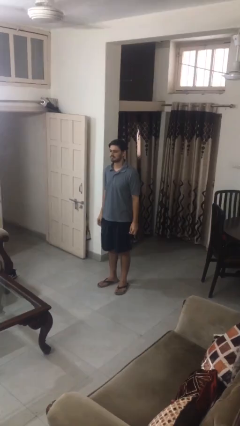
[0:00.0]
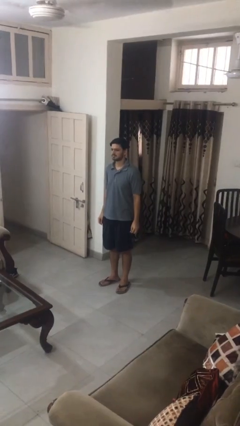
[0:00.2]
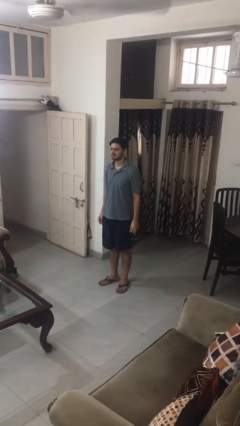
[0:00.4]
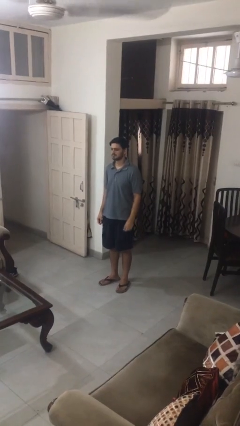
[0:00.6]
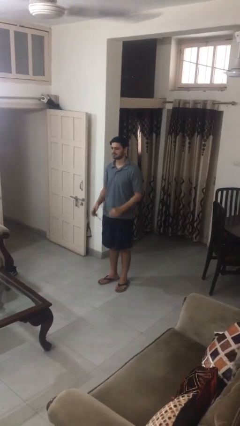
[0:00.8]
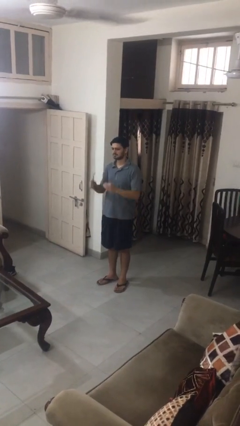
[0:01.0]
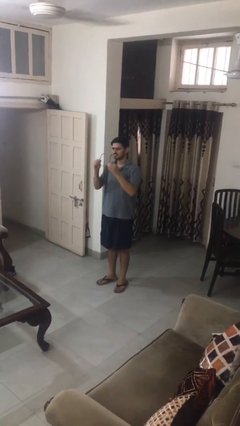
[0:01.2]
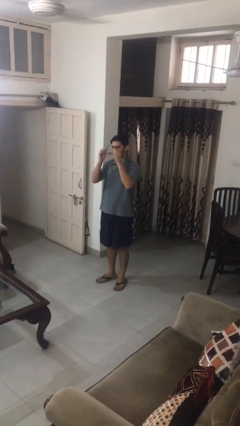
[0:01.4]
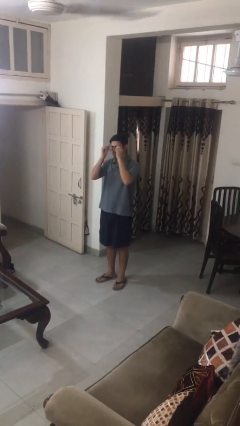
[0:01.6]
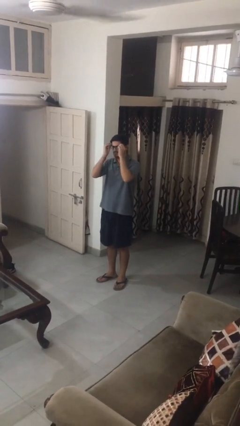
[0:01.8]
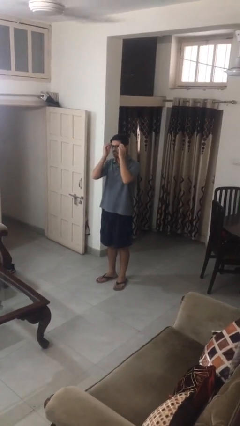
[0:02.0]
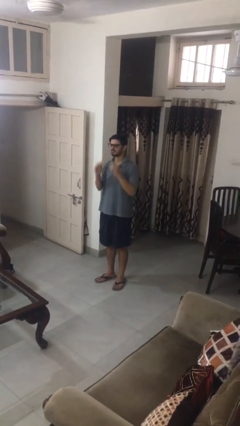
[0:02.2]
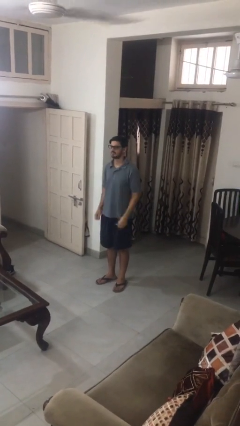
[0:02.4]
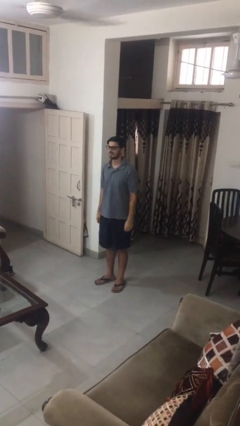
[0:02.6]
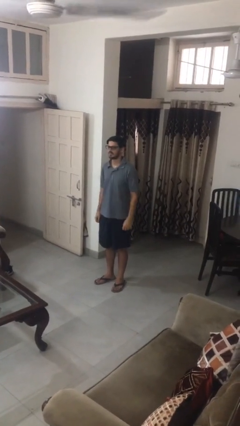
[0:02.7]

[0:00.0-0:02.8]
person puts on glasses

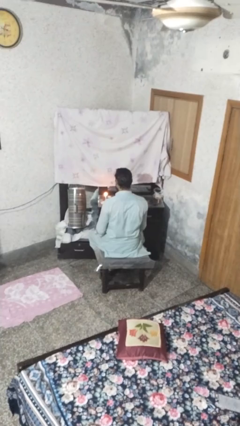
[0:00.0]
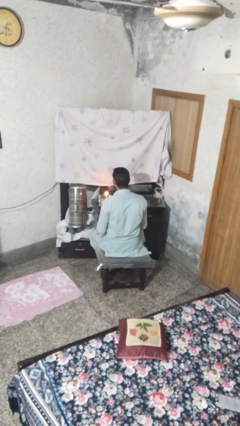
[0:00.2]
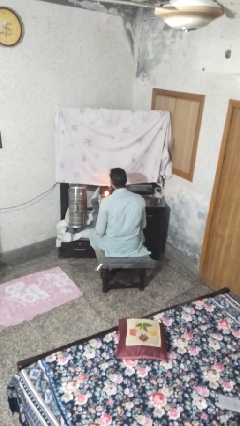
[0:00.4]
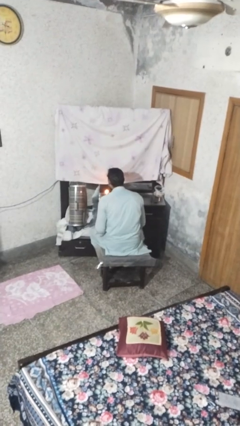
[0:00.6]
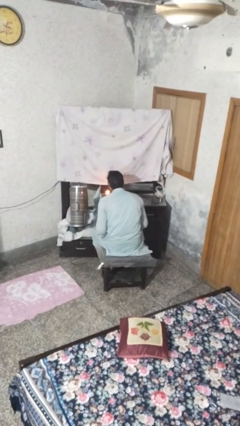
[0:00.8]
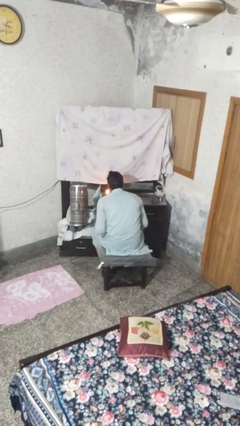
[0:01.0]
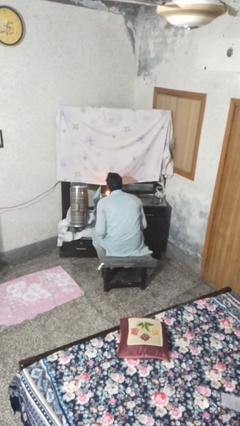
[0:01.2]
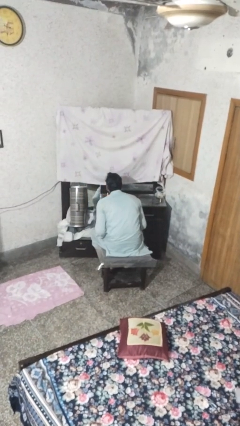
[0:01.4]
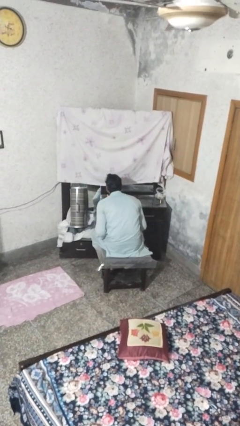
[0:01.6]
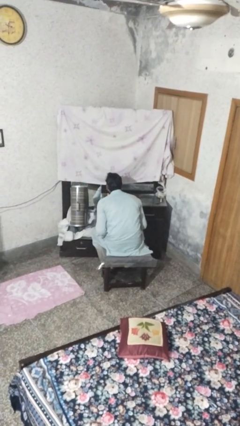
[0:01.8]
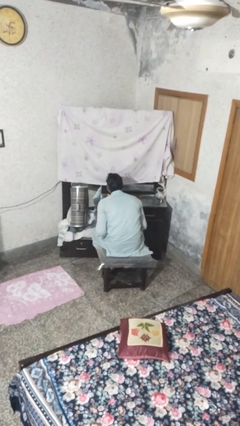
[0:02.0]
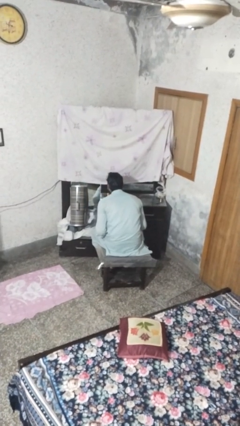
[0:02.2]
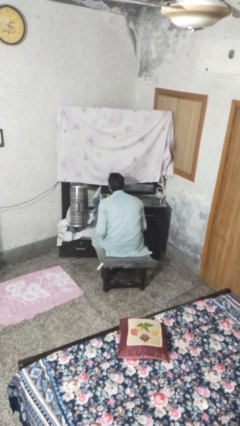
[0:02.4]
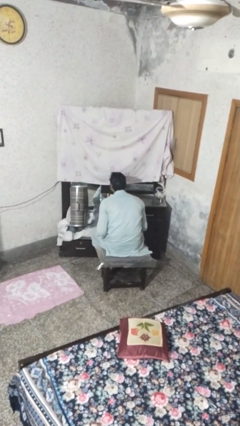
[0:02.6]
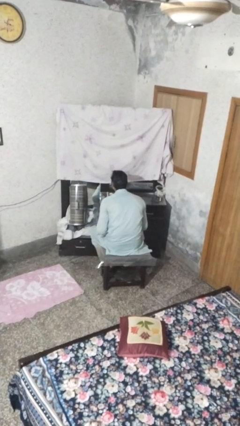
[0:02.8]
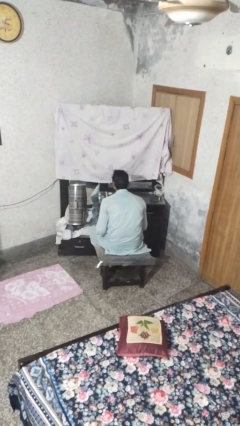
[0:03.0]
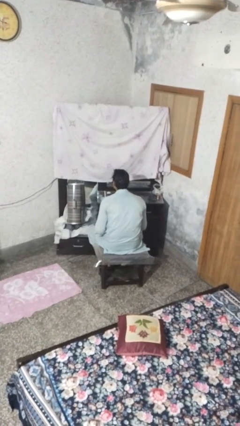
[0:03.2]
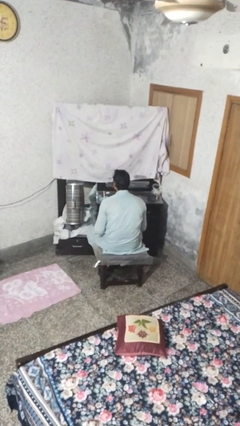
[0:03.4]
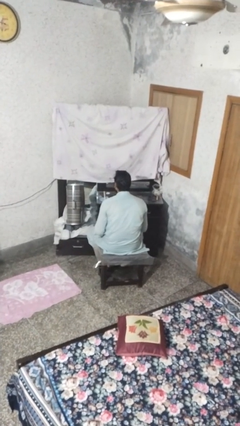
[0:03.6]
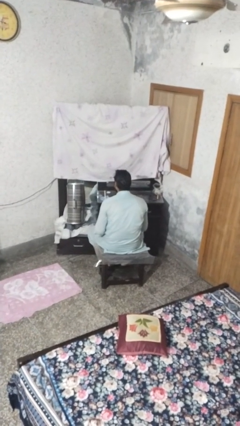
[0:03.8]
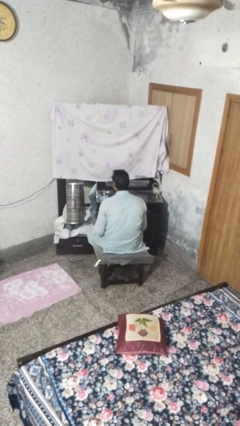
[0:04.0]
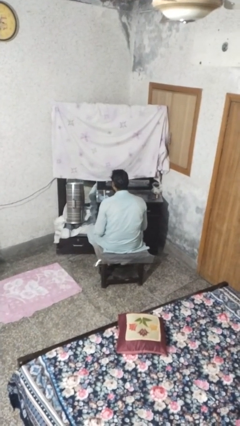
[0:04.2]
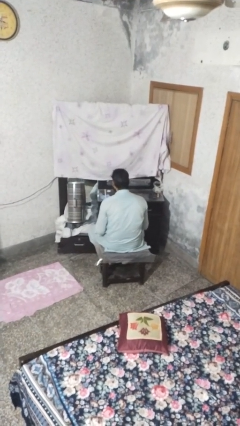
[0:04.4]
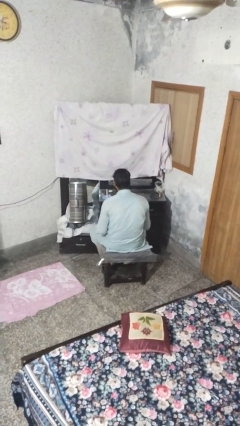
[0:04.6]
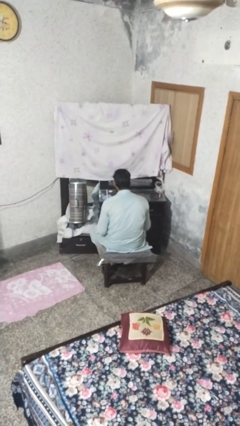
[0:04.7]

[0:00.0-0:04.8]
person extinguishes candle

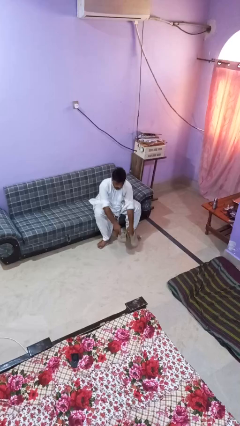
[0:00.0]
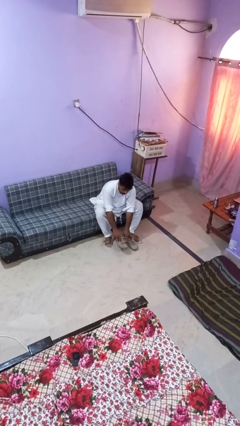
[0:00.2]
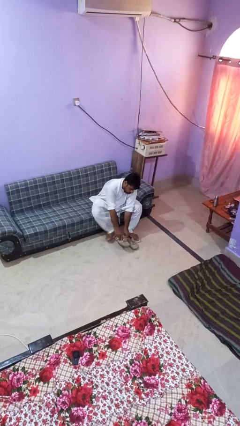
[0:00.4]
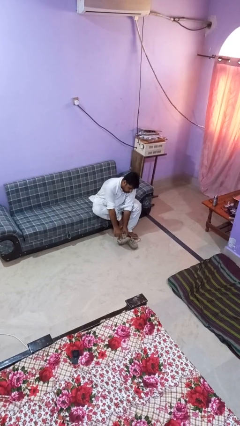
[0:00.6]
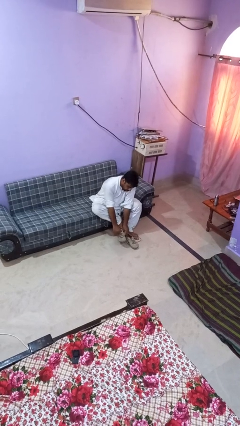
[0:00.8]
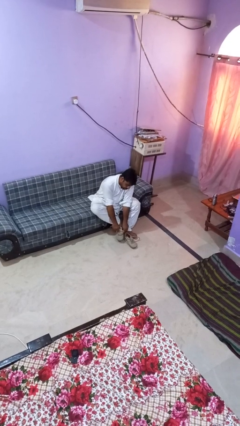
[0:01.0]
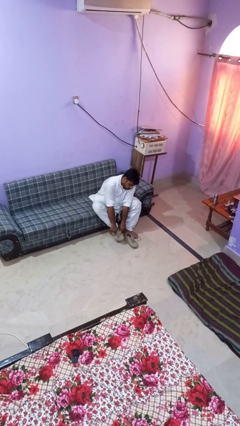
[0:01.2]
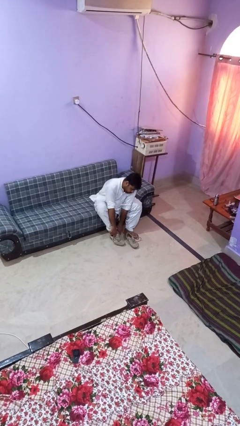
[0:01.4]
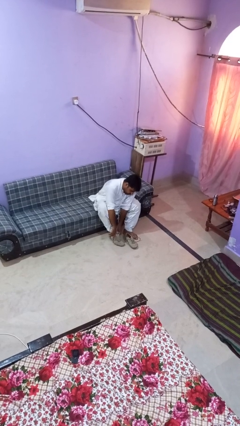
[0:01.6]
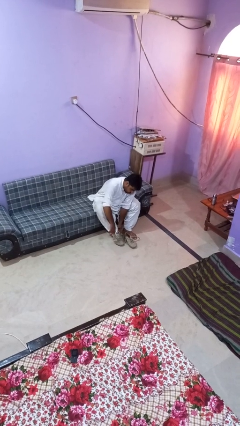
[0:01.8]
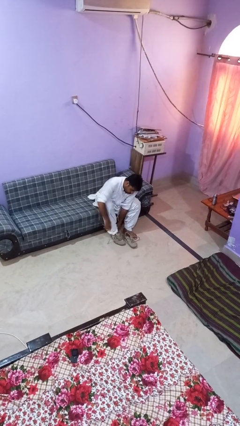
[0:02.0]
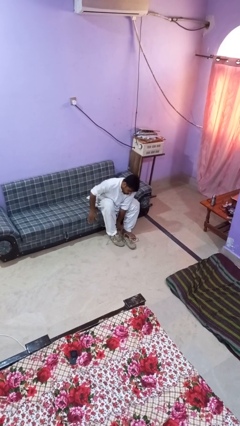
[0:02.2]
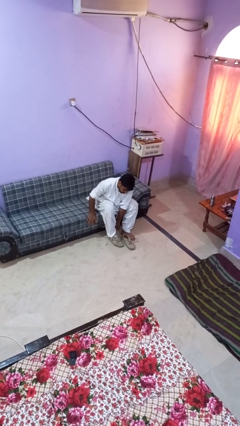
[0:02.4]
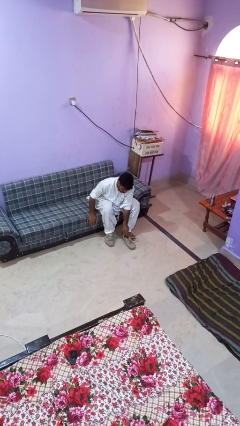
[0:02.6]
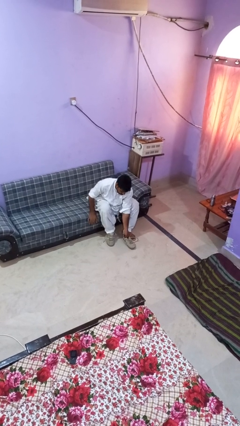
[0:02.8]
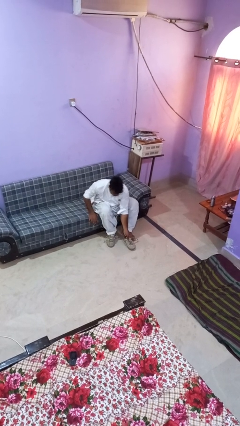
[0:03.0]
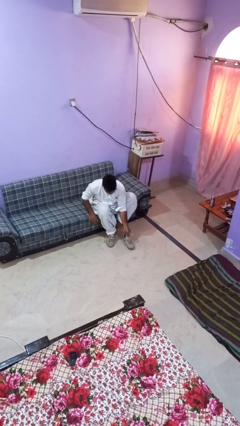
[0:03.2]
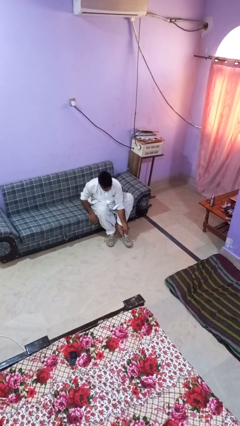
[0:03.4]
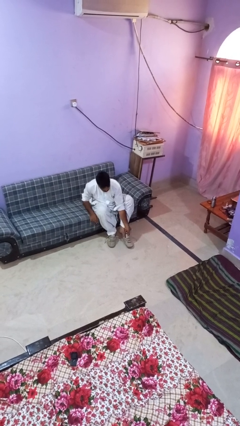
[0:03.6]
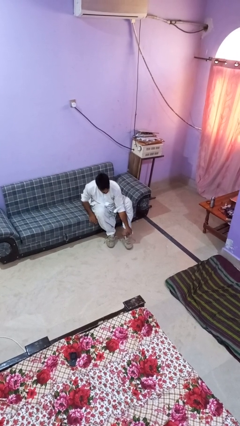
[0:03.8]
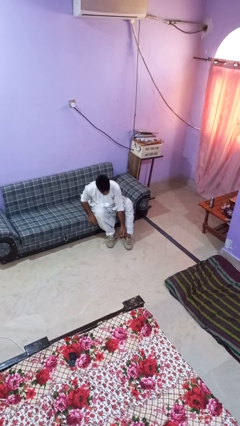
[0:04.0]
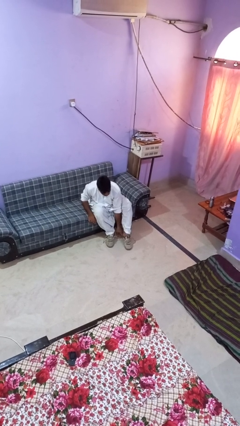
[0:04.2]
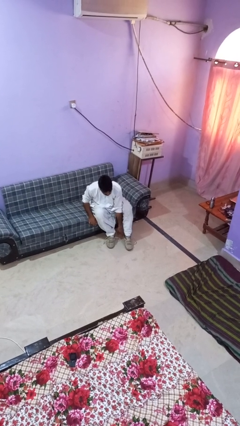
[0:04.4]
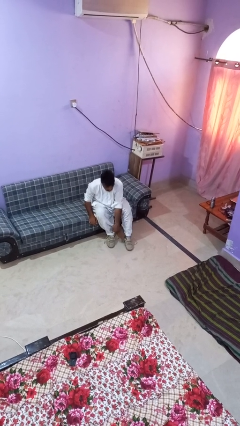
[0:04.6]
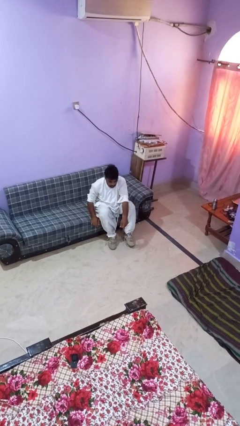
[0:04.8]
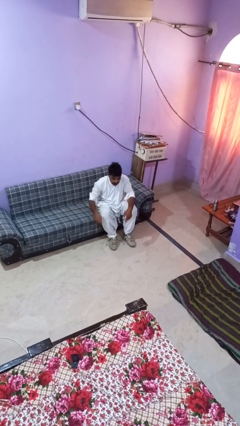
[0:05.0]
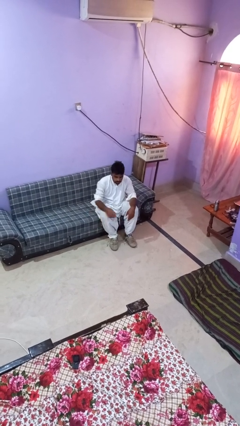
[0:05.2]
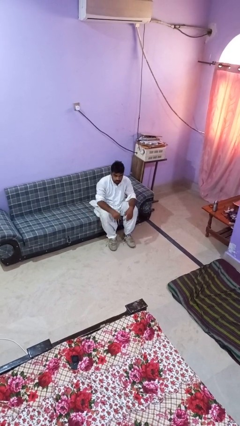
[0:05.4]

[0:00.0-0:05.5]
person puts on boots

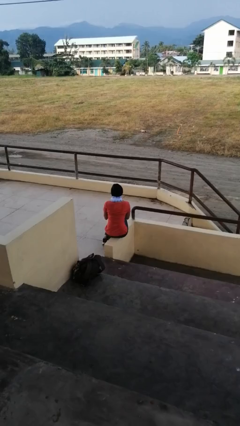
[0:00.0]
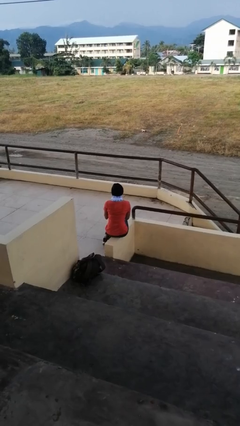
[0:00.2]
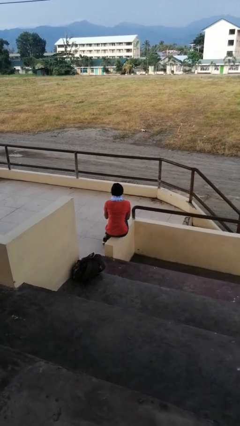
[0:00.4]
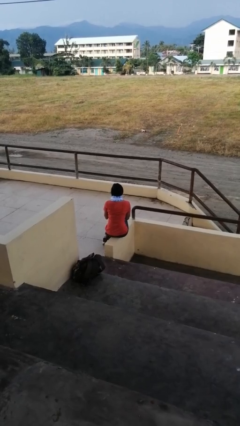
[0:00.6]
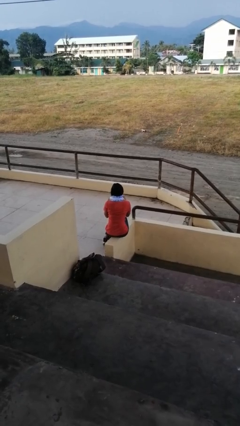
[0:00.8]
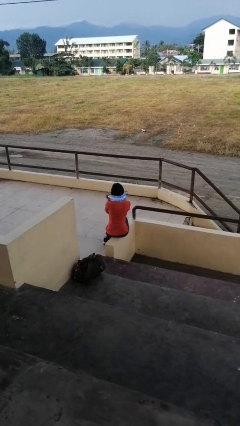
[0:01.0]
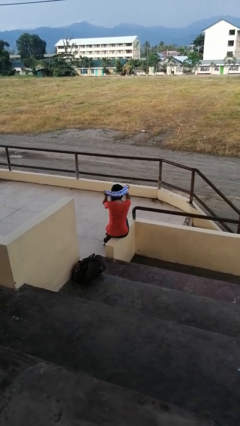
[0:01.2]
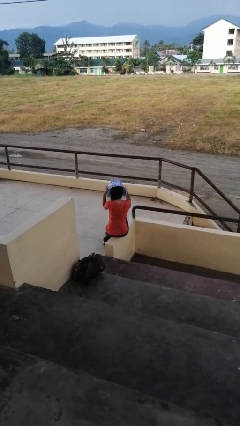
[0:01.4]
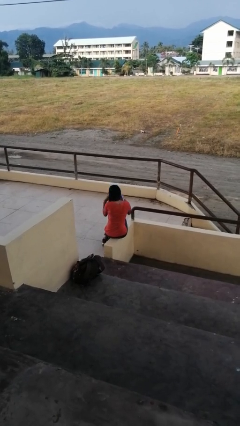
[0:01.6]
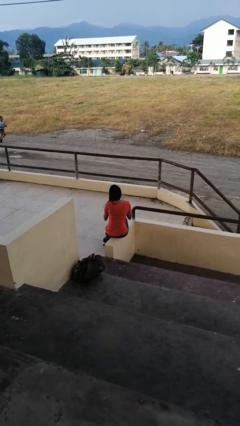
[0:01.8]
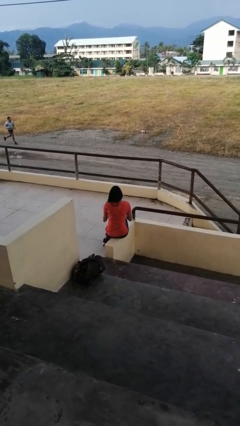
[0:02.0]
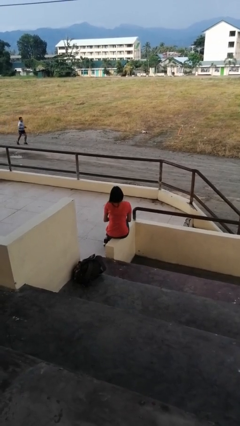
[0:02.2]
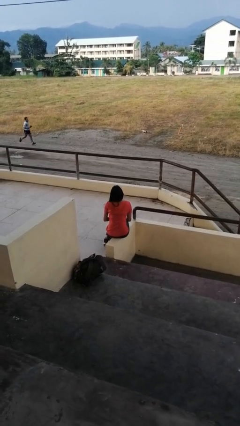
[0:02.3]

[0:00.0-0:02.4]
person takes off scarf

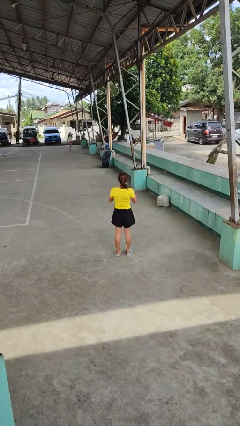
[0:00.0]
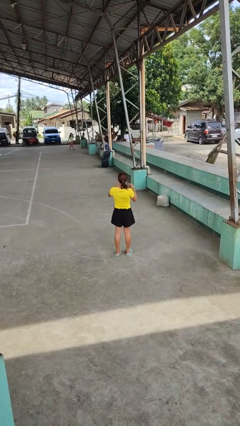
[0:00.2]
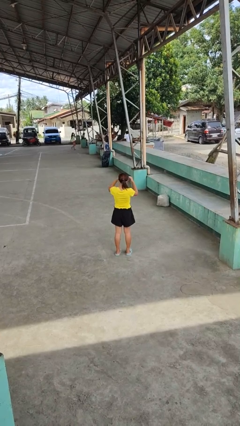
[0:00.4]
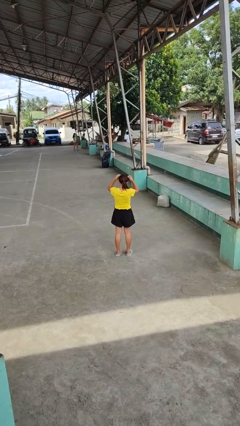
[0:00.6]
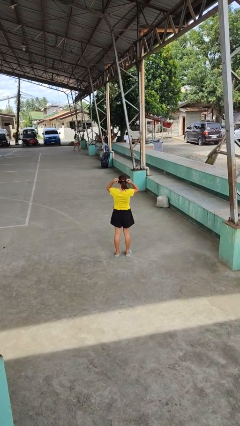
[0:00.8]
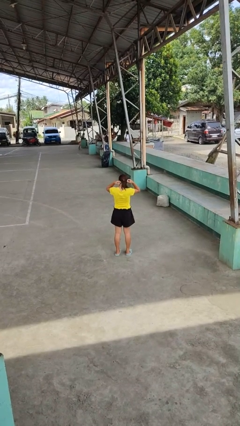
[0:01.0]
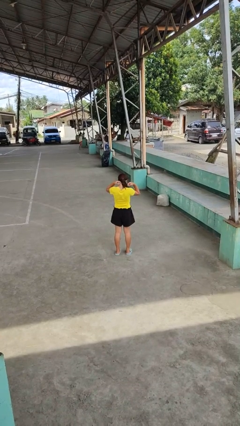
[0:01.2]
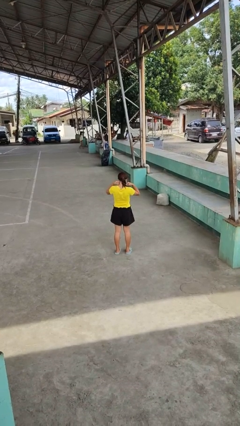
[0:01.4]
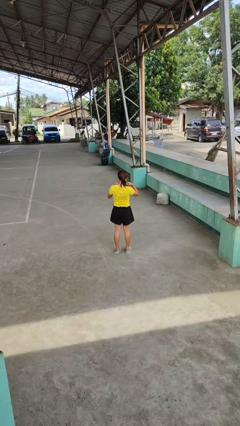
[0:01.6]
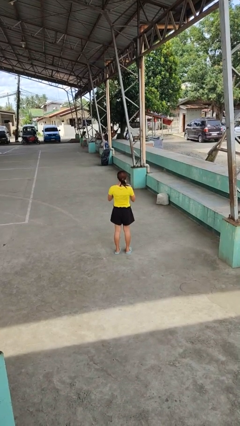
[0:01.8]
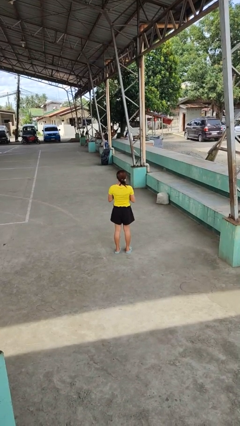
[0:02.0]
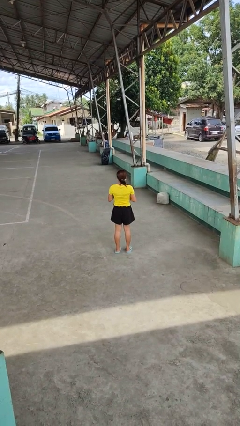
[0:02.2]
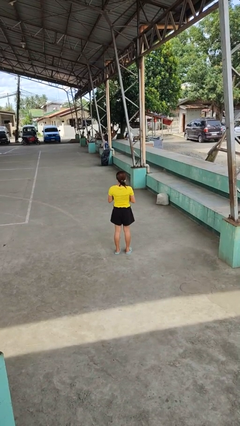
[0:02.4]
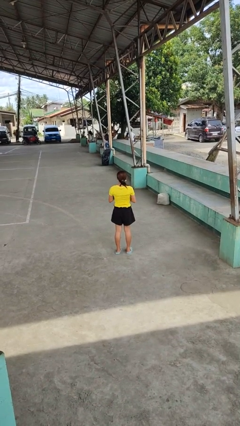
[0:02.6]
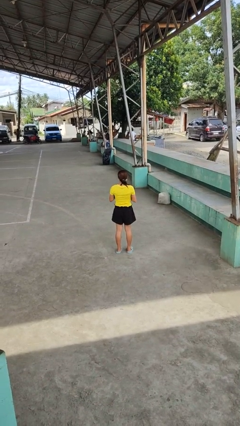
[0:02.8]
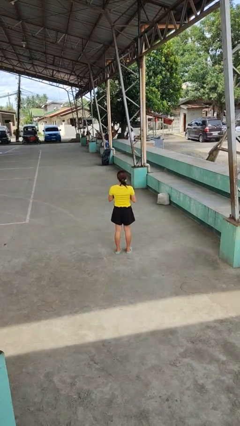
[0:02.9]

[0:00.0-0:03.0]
person puts on necklace
